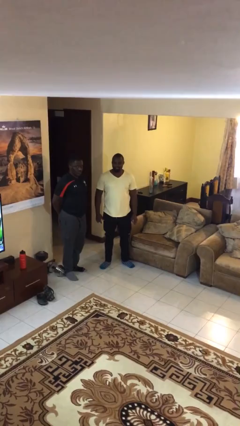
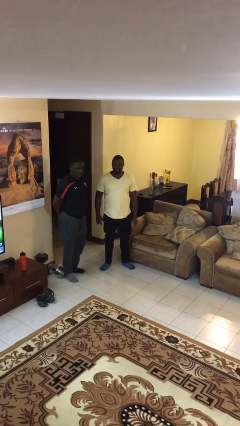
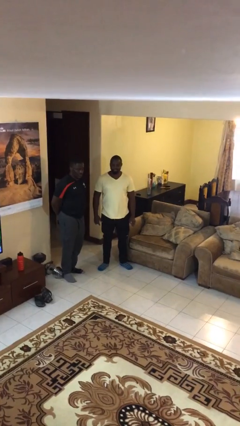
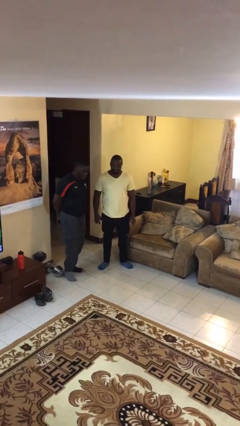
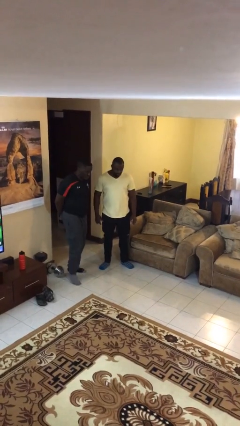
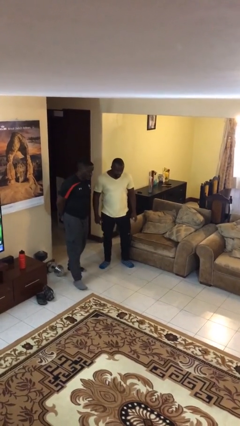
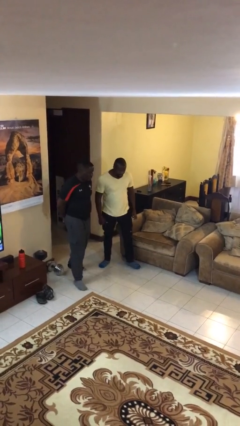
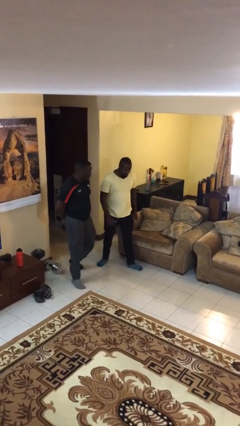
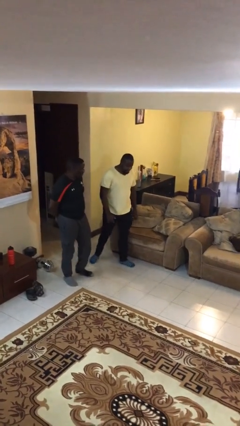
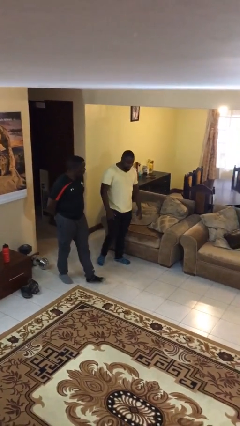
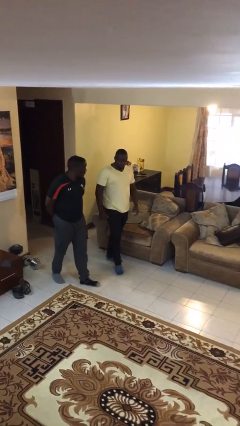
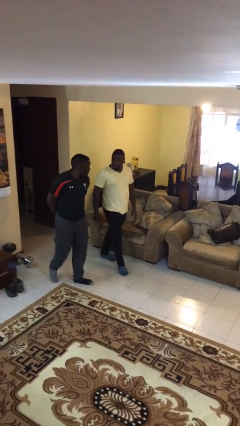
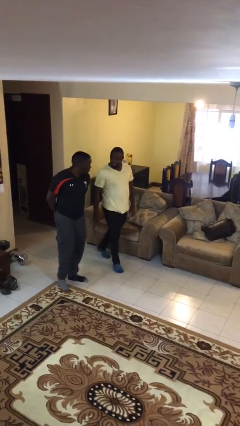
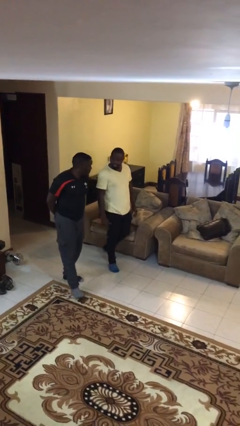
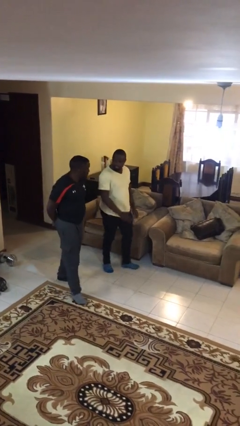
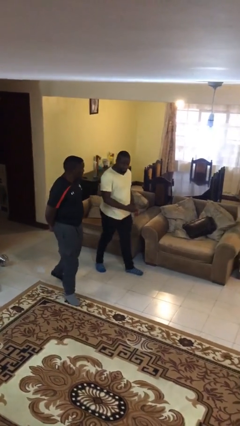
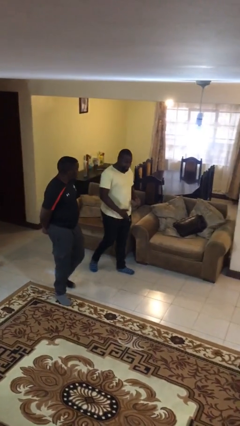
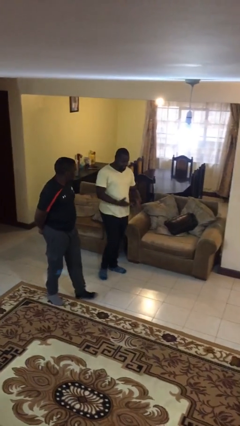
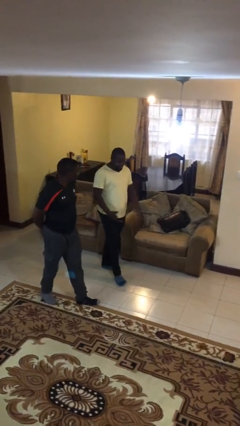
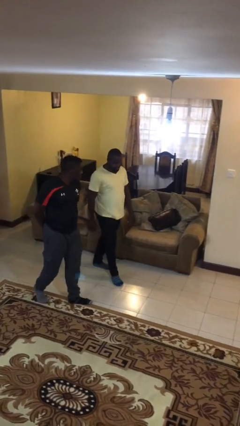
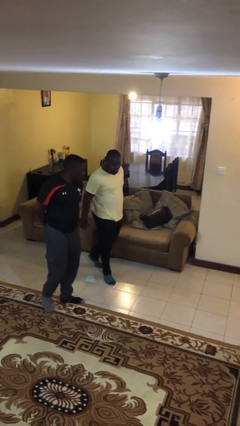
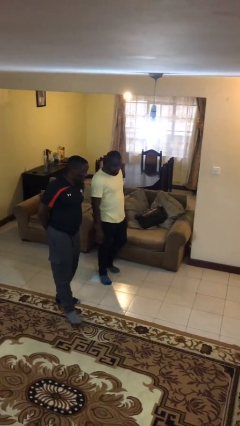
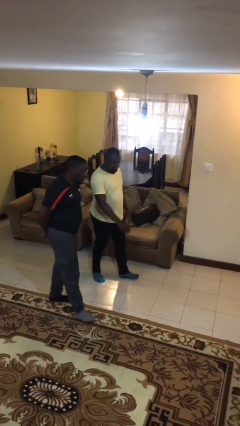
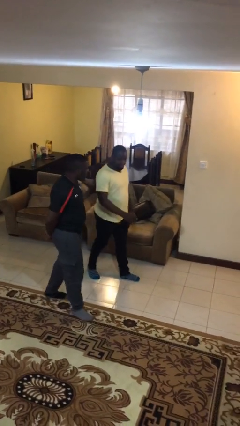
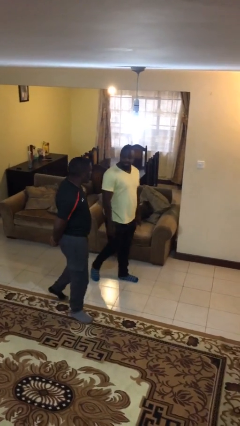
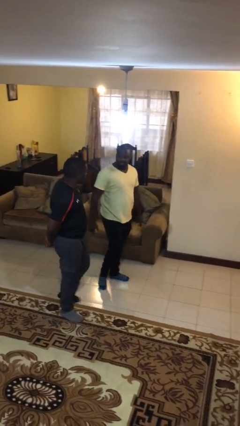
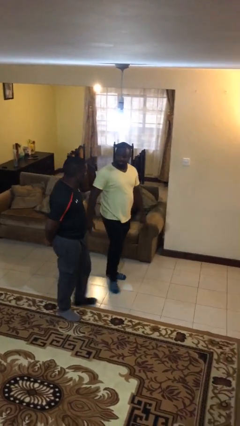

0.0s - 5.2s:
person talks to person

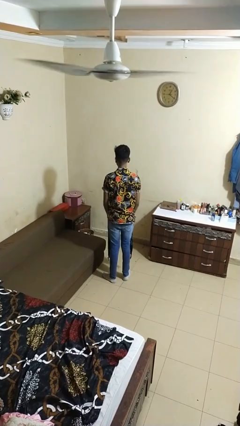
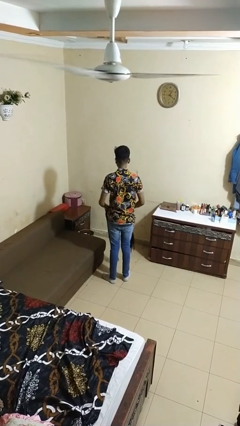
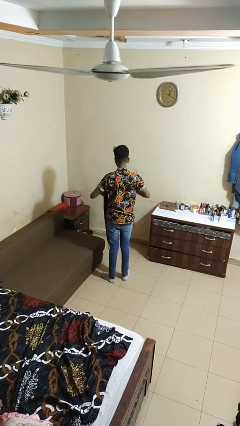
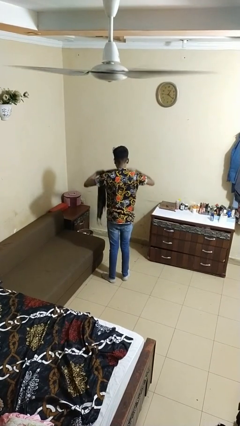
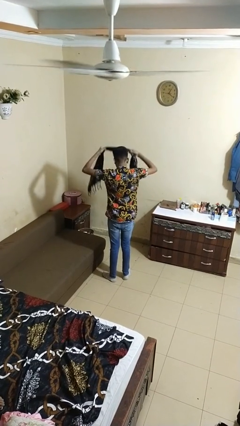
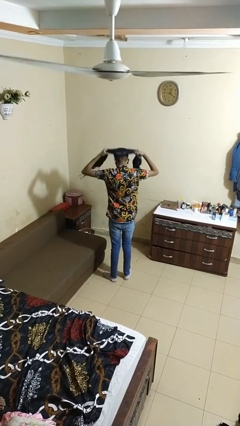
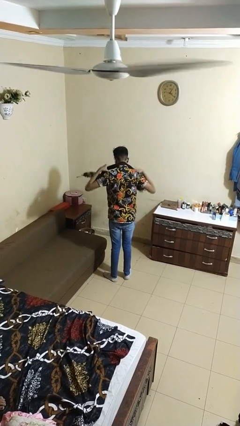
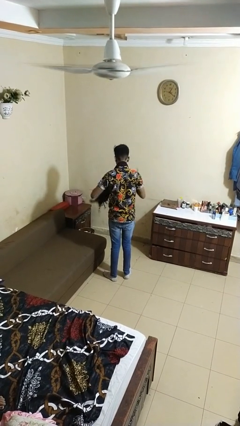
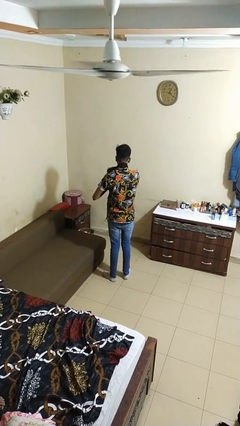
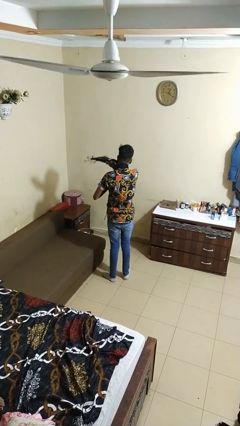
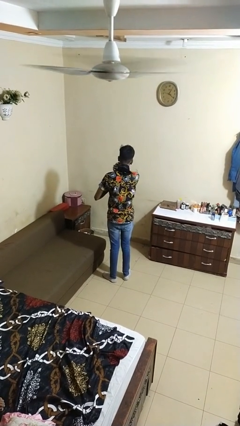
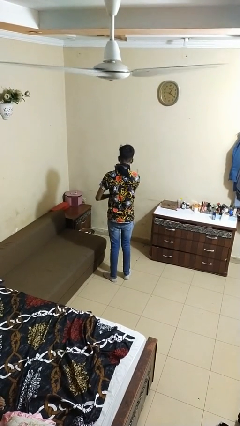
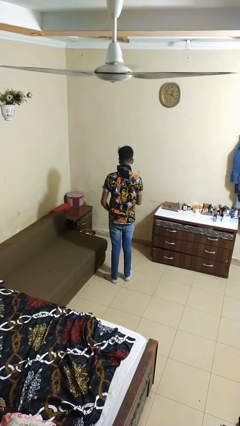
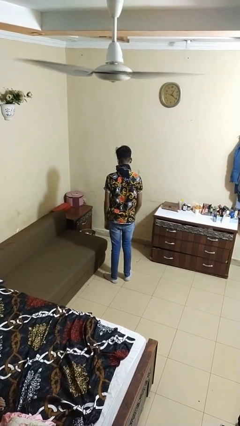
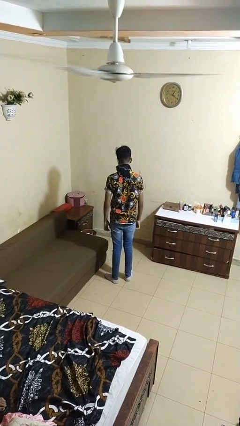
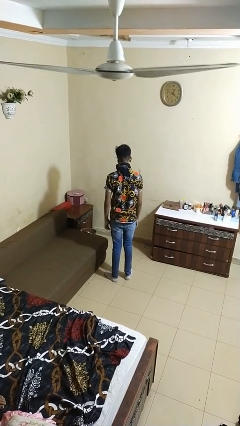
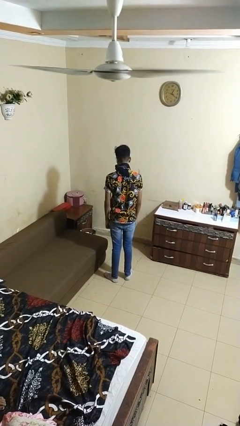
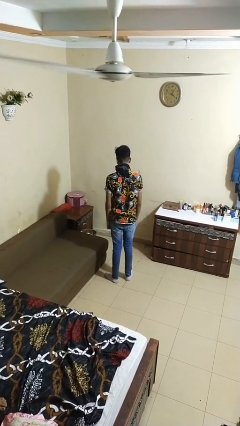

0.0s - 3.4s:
person puts on scarf

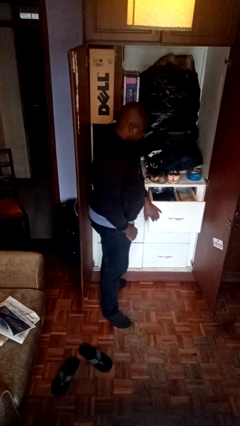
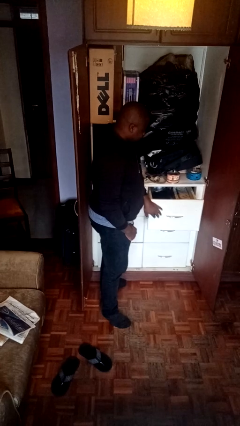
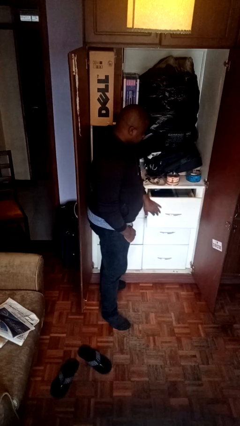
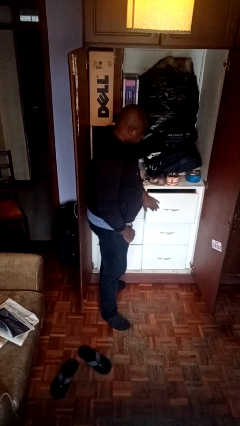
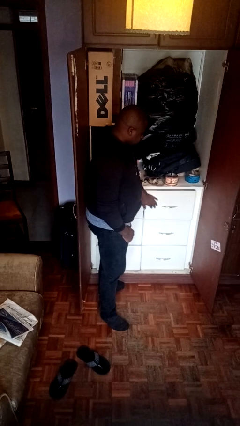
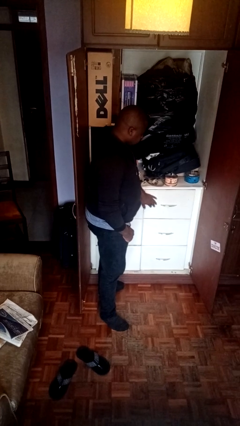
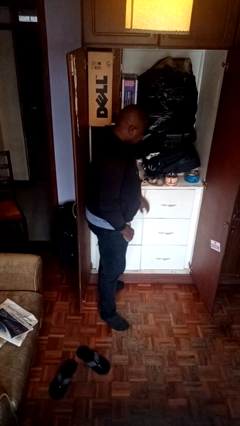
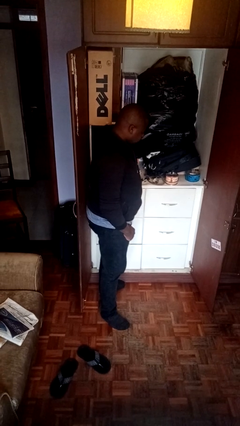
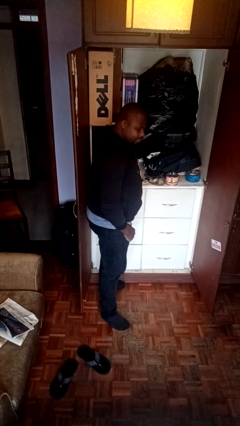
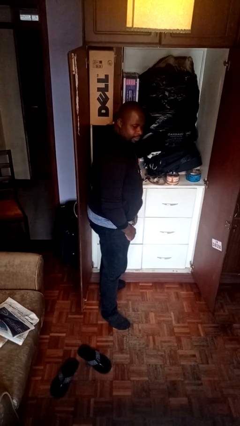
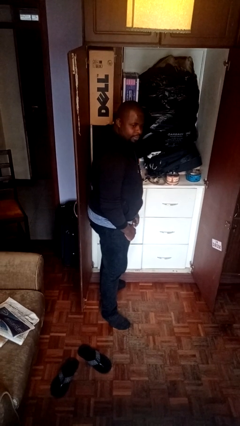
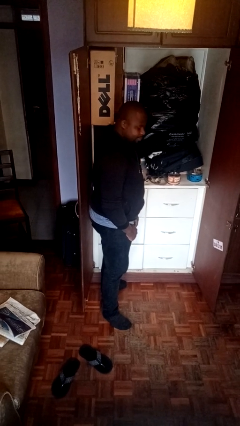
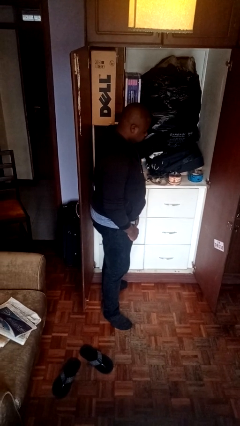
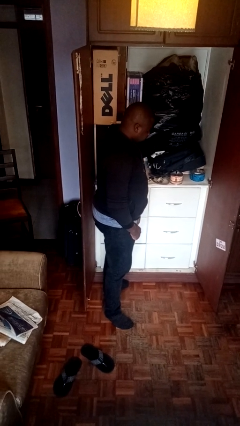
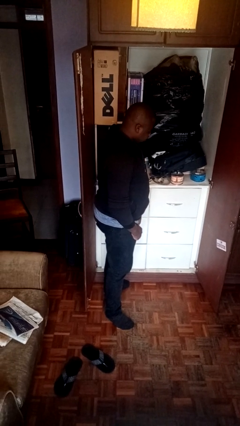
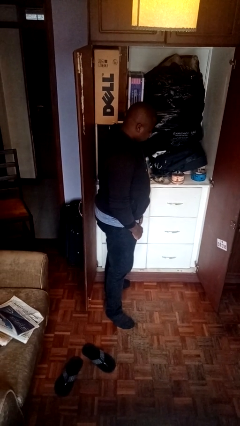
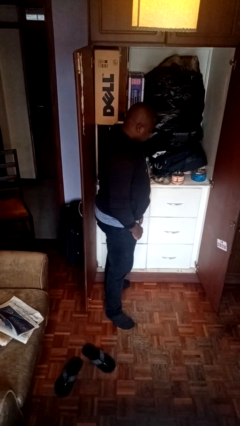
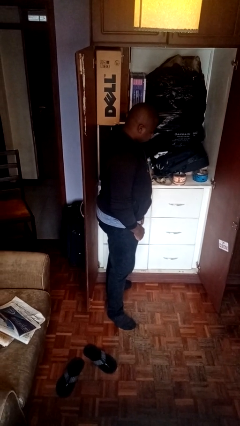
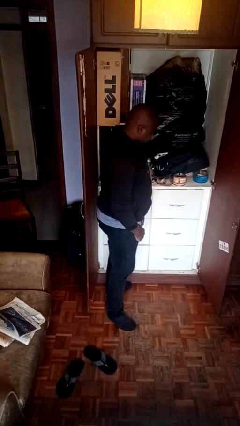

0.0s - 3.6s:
person closes dresser drawer

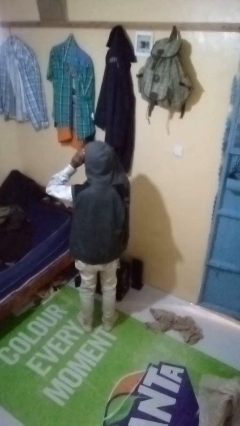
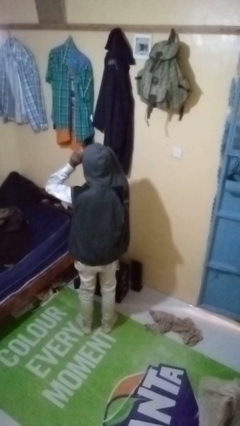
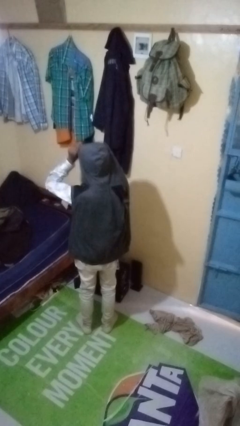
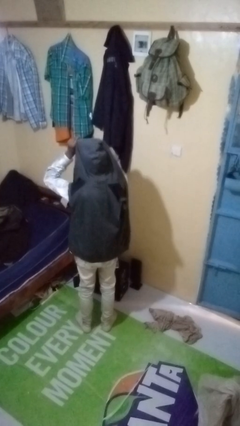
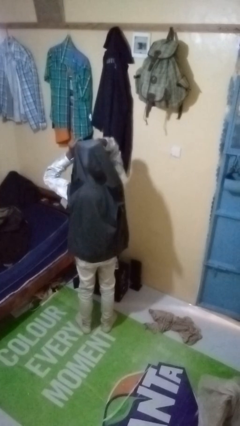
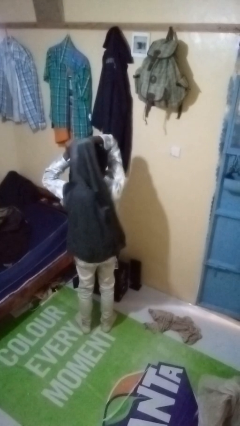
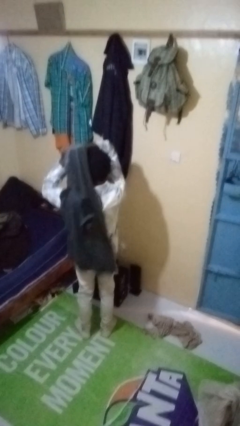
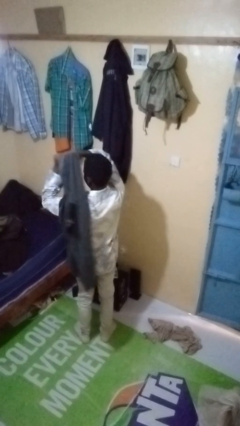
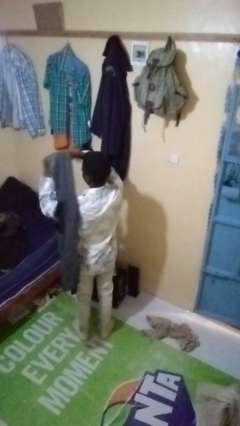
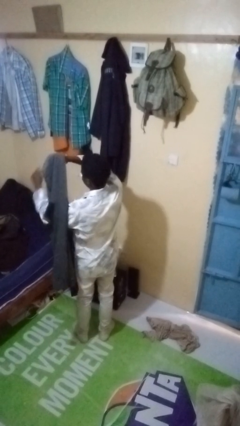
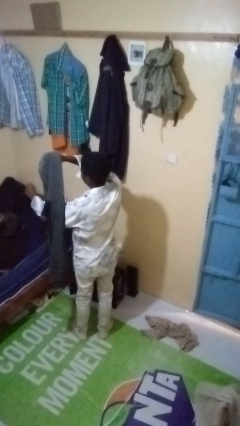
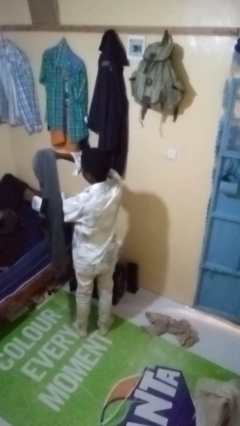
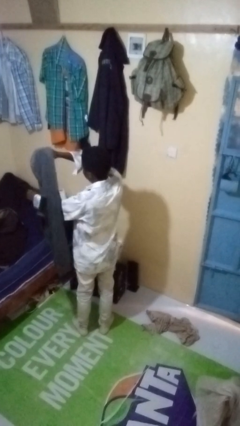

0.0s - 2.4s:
person takes off hoodie

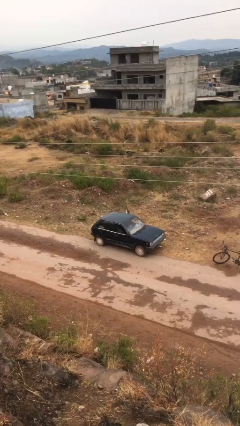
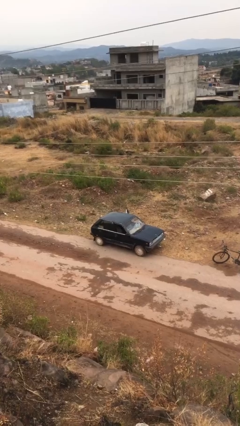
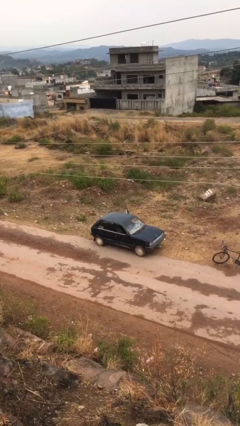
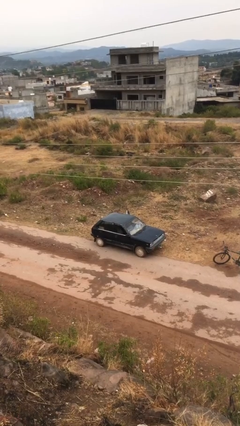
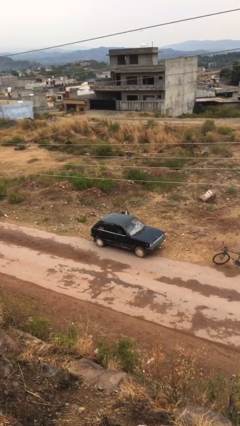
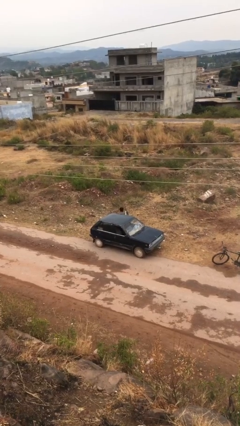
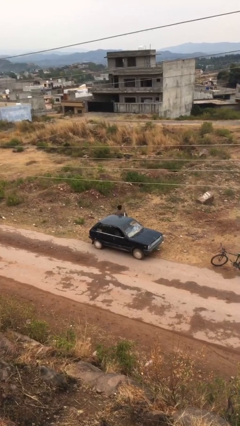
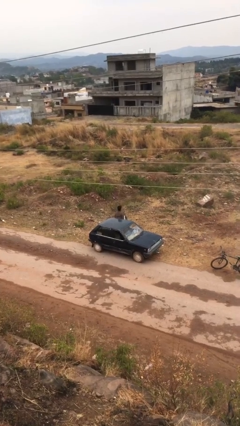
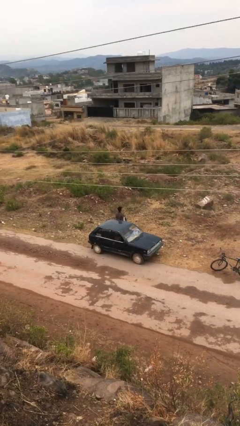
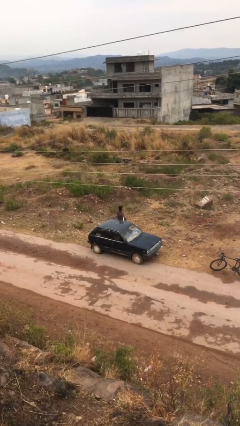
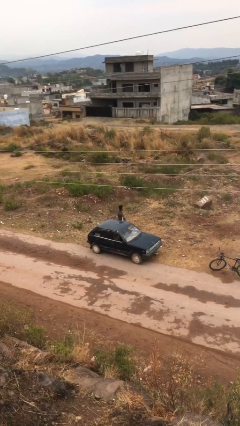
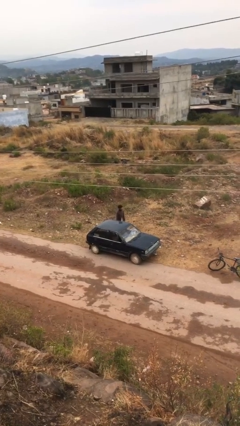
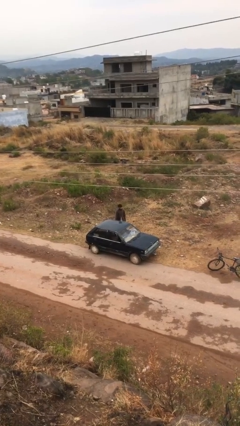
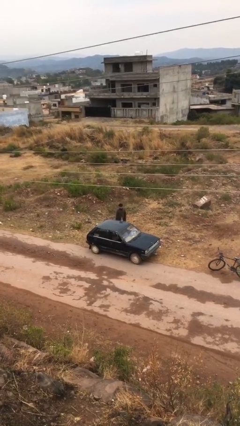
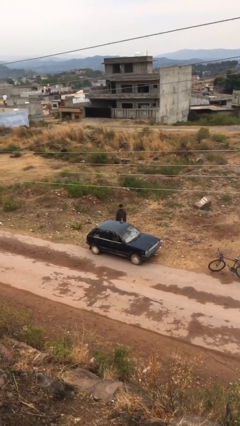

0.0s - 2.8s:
person exits car
